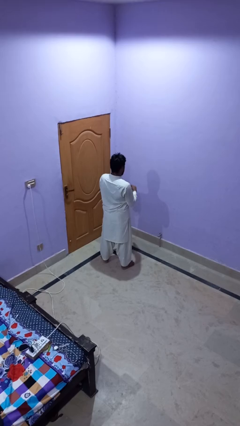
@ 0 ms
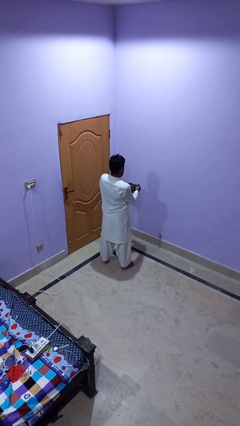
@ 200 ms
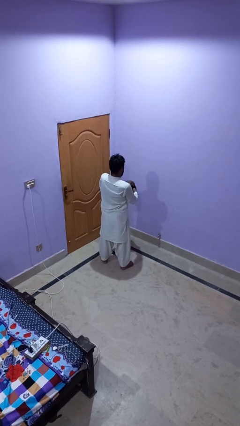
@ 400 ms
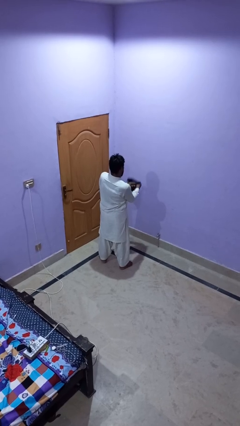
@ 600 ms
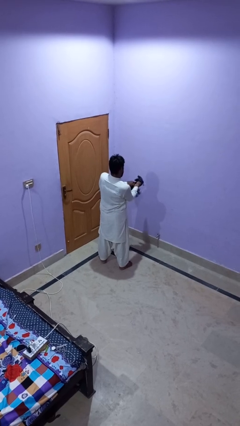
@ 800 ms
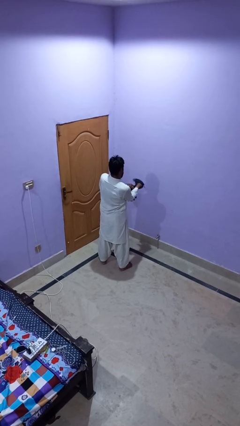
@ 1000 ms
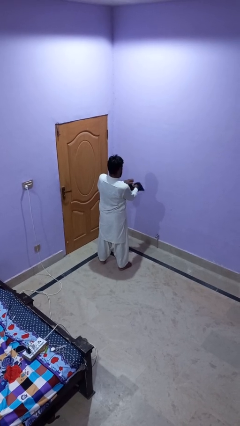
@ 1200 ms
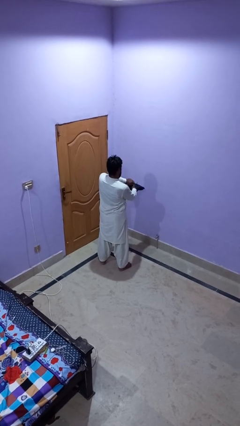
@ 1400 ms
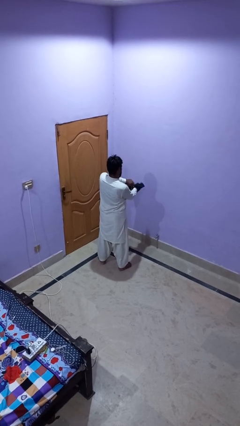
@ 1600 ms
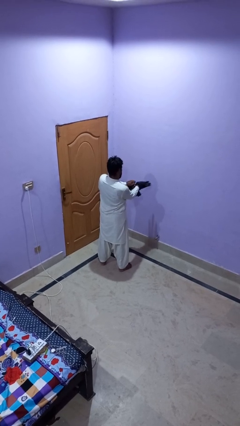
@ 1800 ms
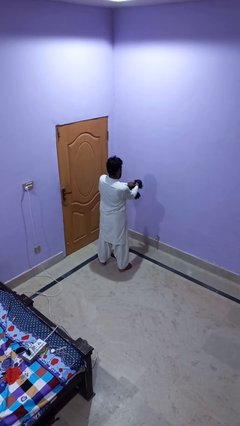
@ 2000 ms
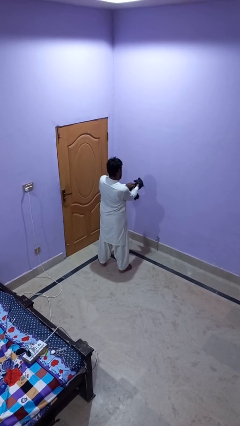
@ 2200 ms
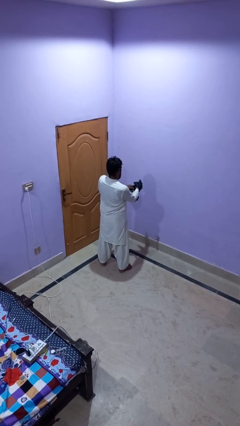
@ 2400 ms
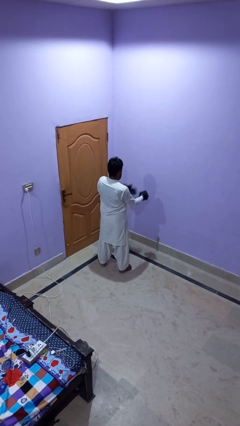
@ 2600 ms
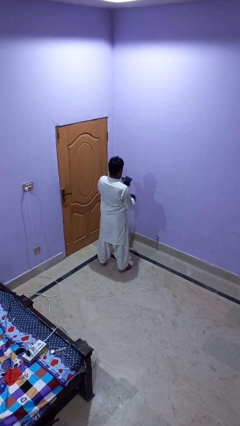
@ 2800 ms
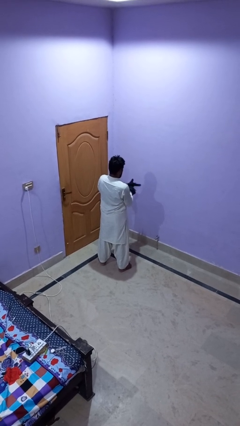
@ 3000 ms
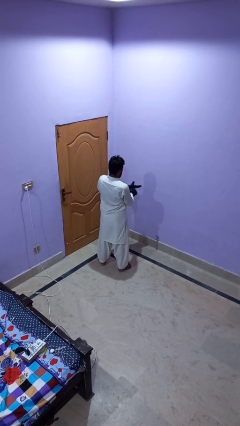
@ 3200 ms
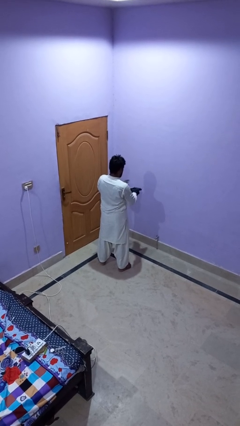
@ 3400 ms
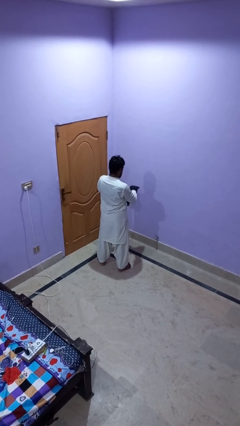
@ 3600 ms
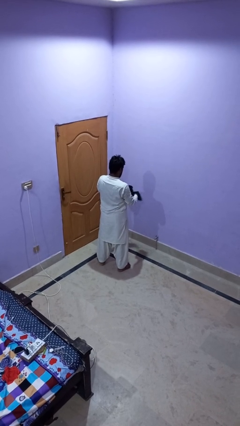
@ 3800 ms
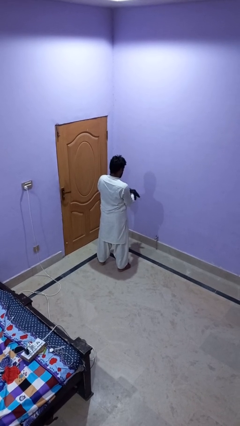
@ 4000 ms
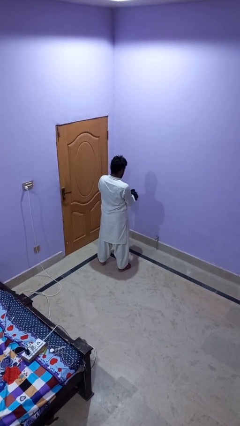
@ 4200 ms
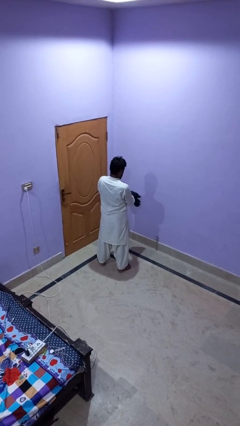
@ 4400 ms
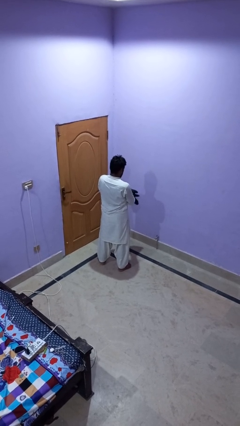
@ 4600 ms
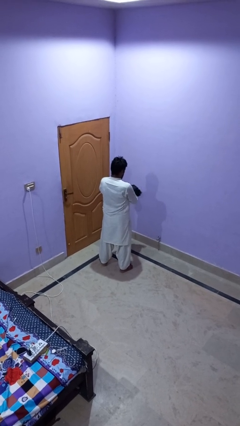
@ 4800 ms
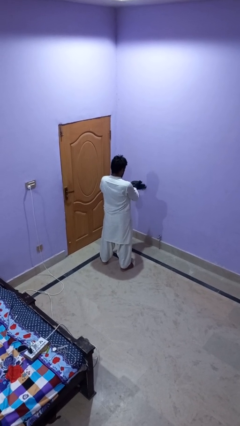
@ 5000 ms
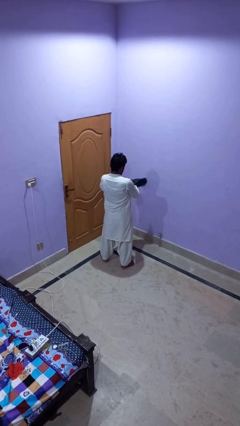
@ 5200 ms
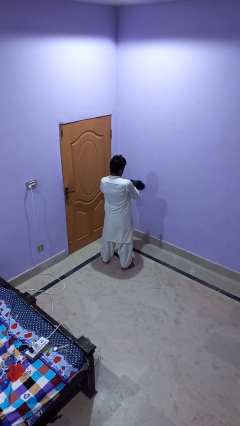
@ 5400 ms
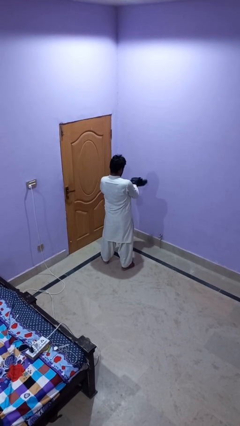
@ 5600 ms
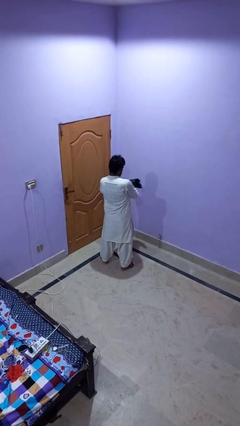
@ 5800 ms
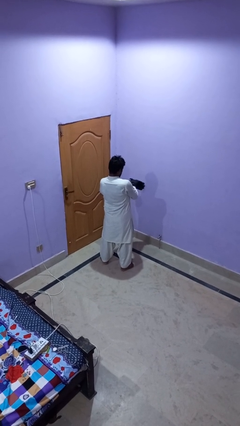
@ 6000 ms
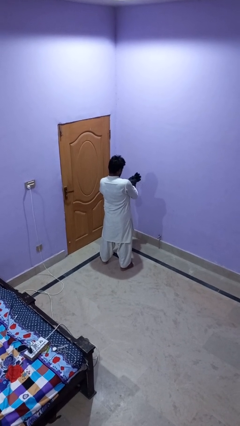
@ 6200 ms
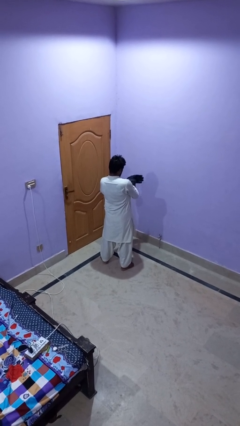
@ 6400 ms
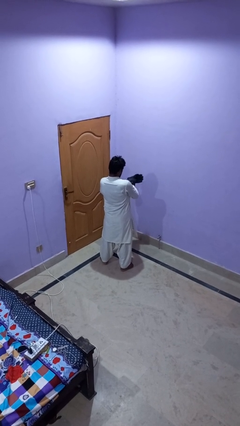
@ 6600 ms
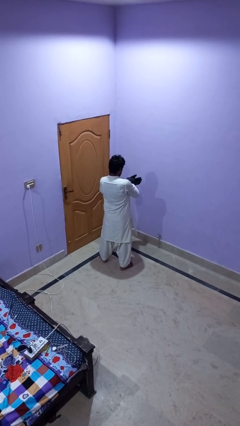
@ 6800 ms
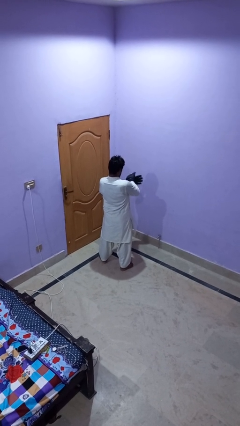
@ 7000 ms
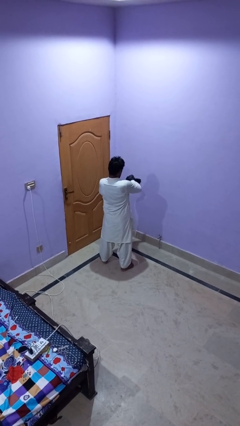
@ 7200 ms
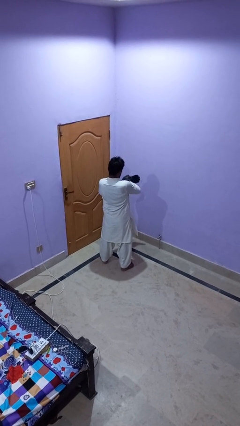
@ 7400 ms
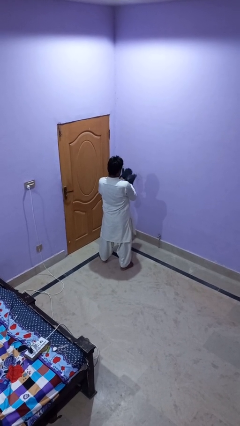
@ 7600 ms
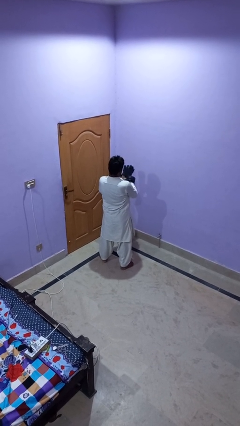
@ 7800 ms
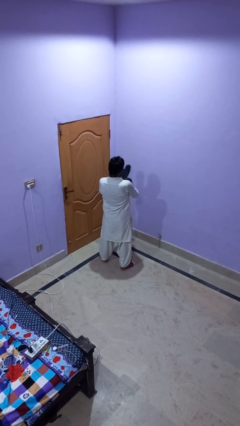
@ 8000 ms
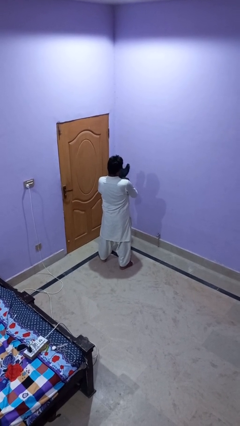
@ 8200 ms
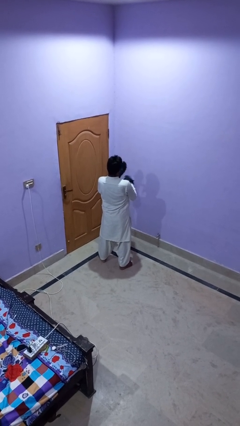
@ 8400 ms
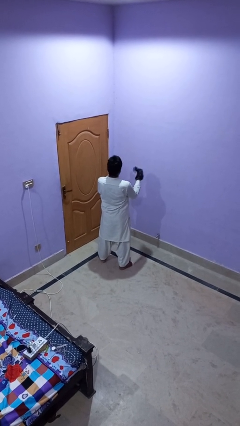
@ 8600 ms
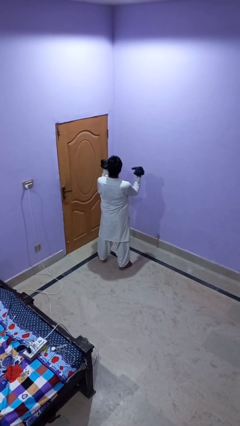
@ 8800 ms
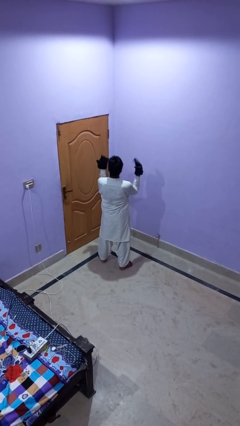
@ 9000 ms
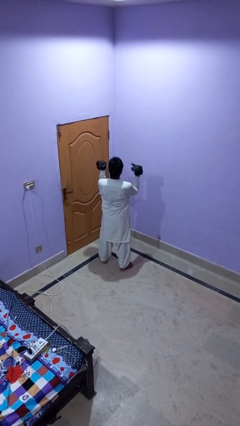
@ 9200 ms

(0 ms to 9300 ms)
person puts on gloves

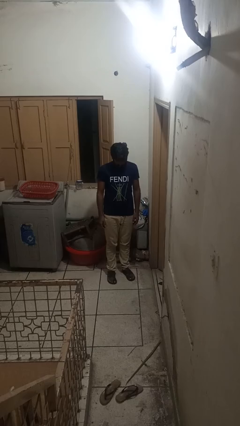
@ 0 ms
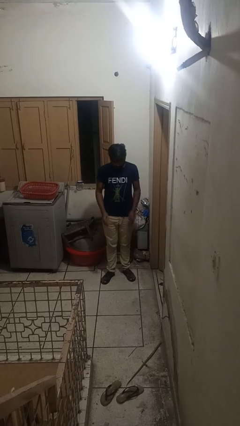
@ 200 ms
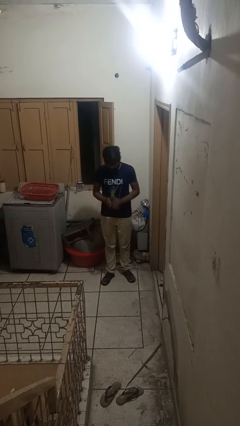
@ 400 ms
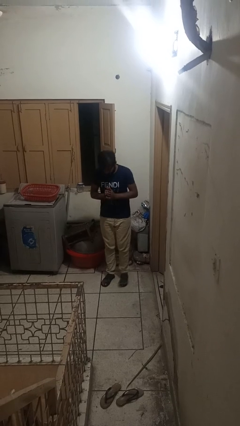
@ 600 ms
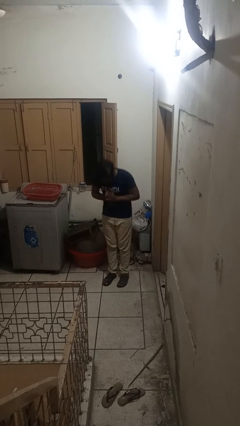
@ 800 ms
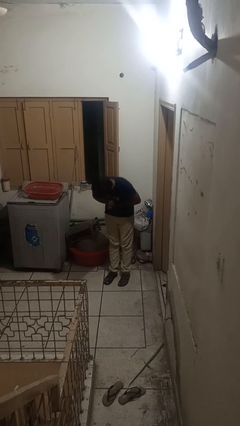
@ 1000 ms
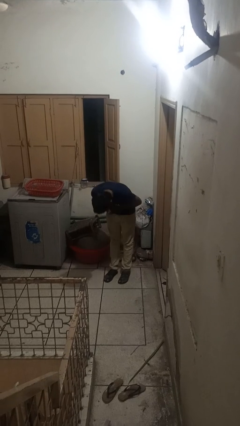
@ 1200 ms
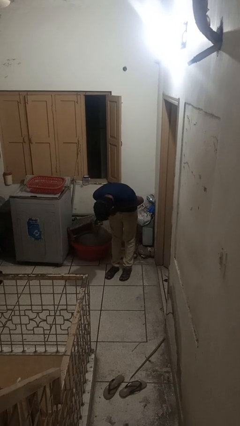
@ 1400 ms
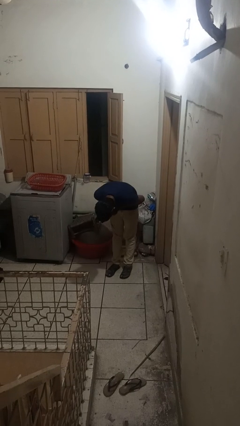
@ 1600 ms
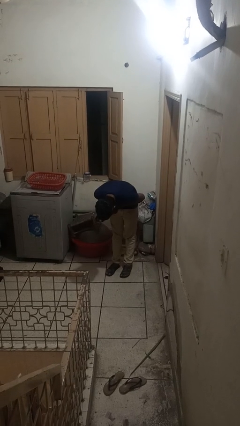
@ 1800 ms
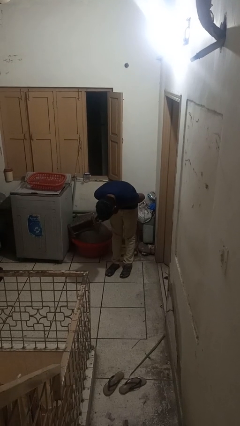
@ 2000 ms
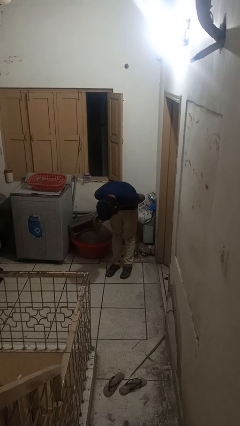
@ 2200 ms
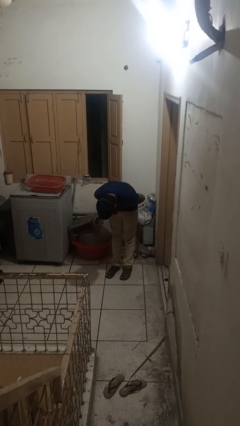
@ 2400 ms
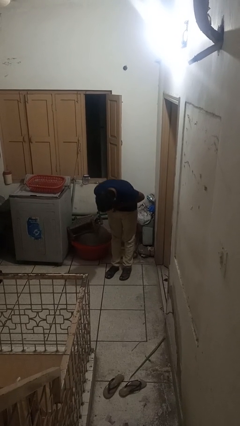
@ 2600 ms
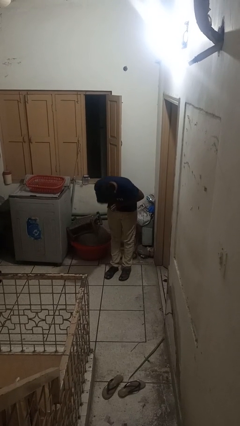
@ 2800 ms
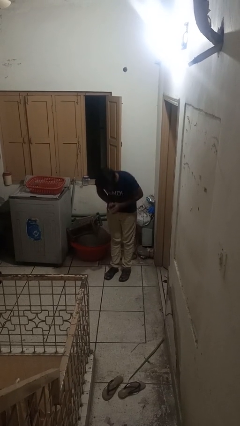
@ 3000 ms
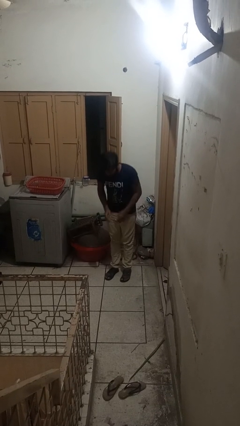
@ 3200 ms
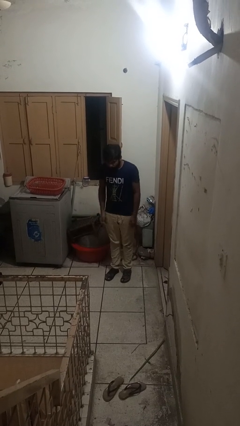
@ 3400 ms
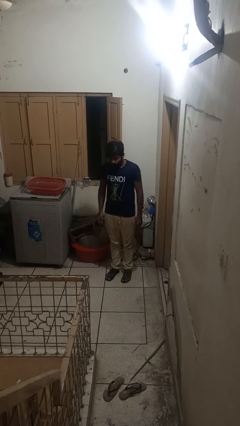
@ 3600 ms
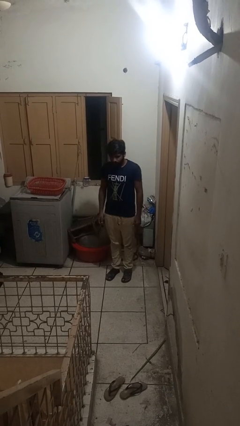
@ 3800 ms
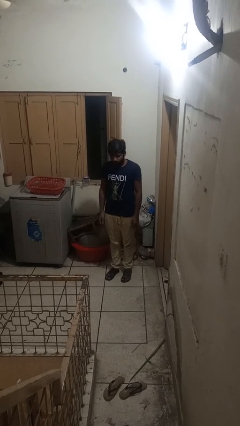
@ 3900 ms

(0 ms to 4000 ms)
person bows

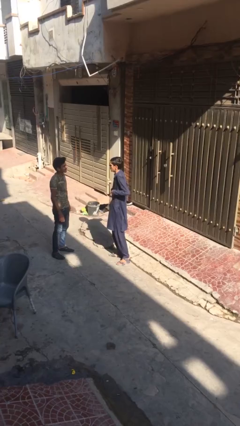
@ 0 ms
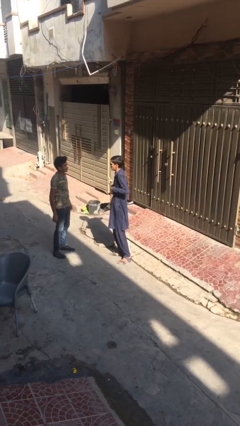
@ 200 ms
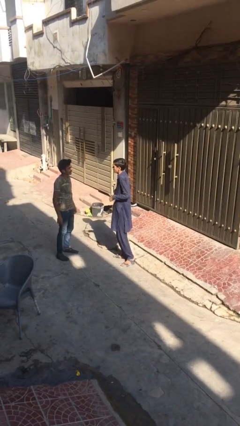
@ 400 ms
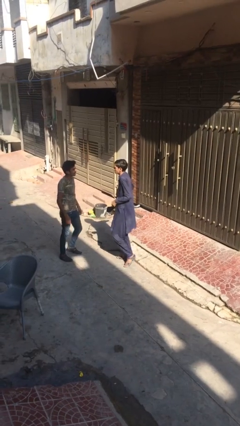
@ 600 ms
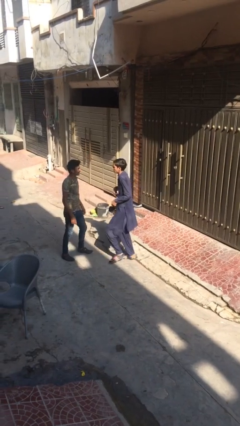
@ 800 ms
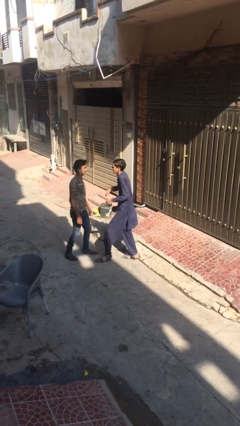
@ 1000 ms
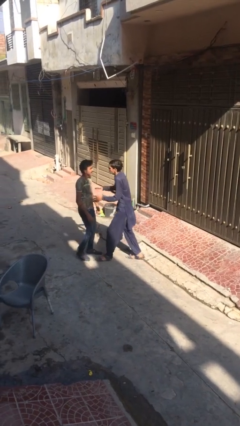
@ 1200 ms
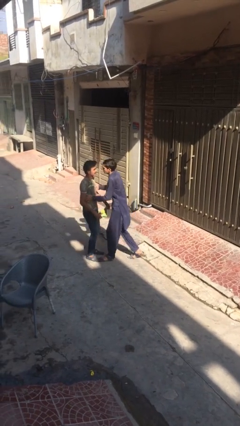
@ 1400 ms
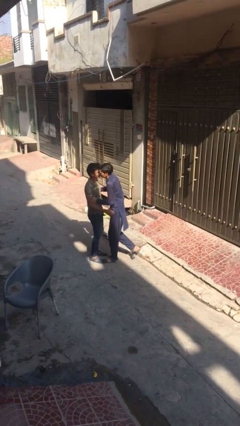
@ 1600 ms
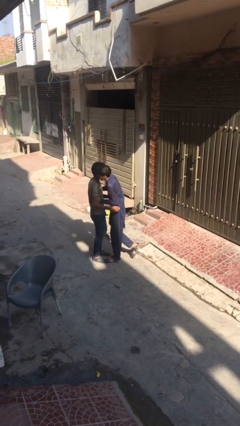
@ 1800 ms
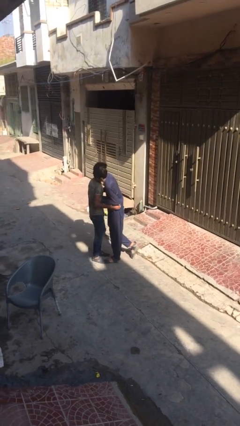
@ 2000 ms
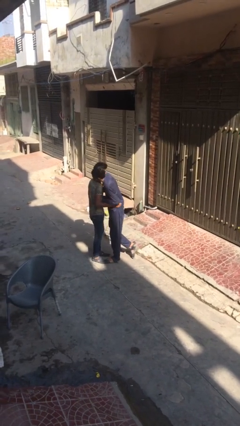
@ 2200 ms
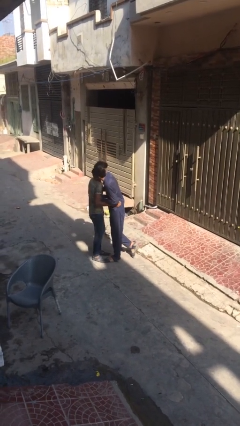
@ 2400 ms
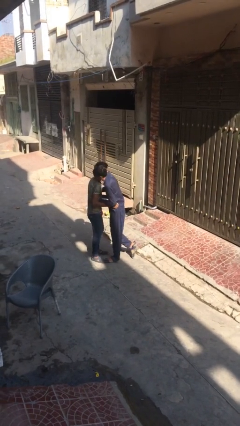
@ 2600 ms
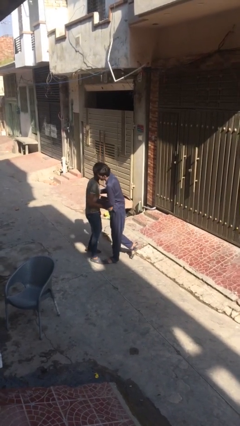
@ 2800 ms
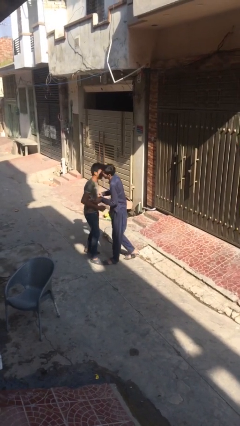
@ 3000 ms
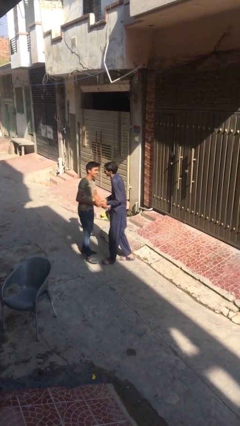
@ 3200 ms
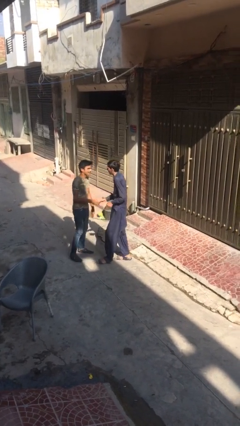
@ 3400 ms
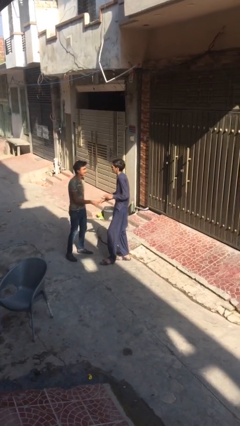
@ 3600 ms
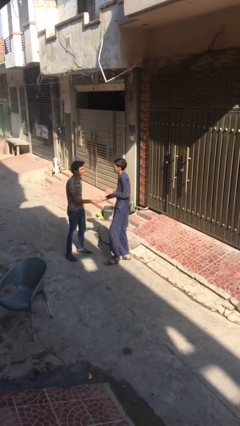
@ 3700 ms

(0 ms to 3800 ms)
person embraces person

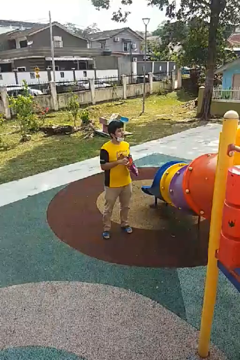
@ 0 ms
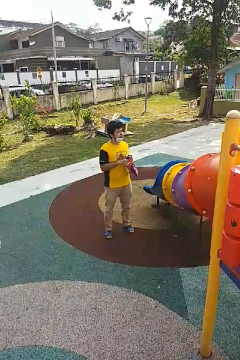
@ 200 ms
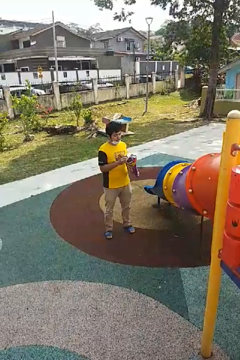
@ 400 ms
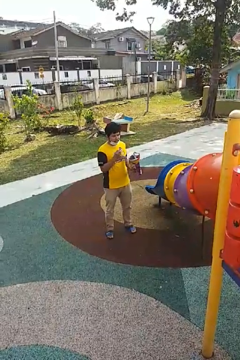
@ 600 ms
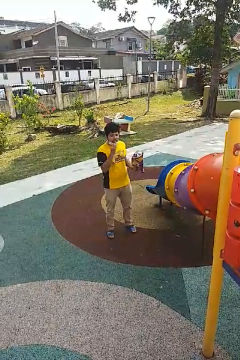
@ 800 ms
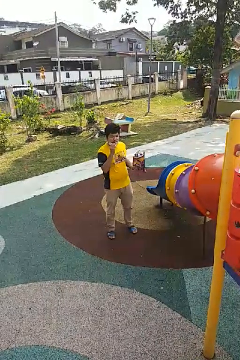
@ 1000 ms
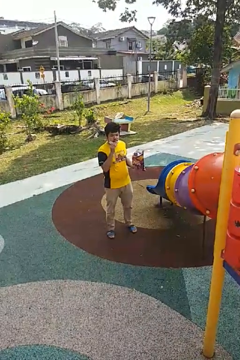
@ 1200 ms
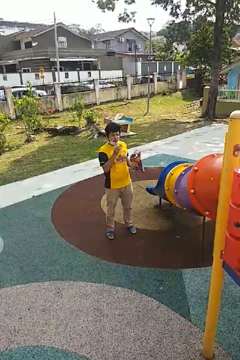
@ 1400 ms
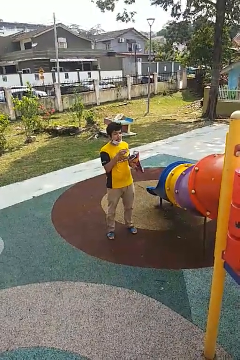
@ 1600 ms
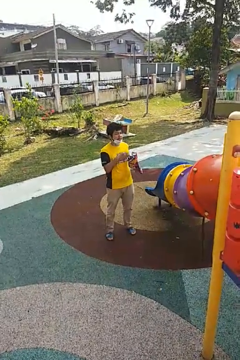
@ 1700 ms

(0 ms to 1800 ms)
person eats snack from bag
